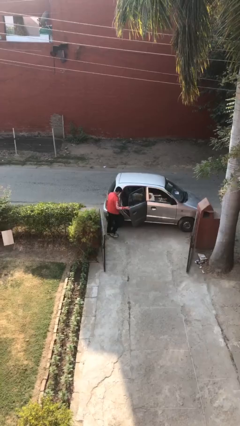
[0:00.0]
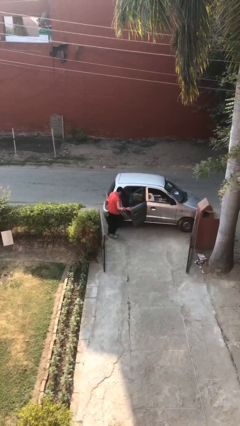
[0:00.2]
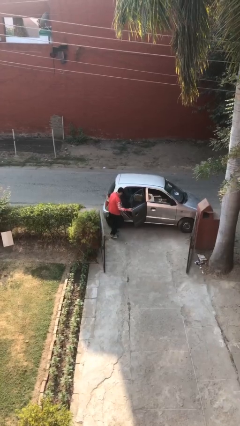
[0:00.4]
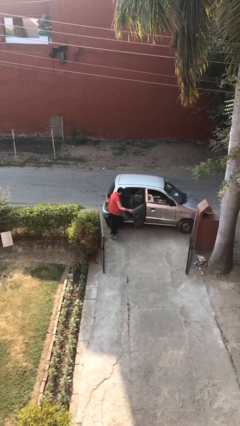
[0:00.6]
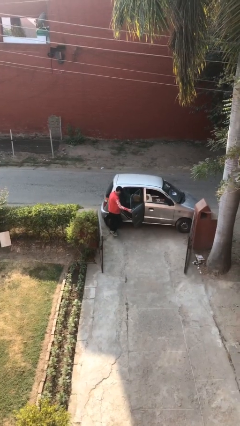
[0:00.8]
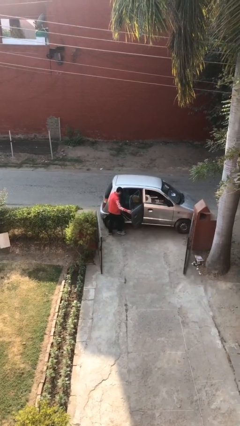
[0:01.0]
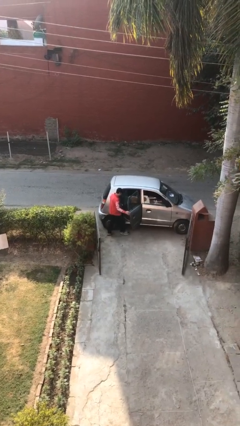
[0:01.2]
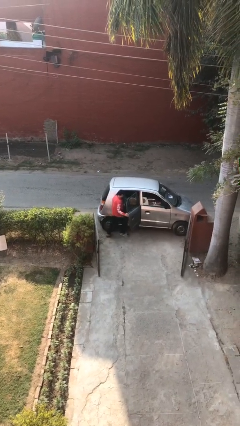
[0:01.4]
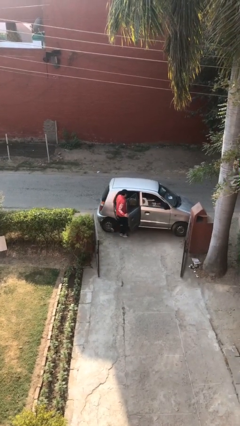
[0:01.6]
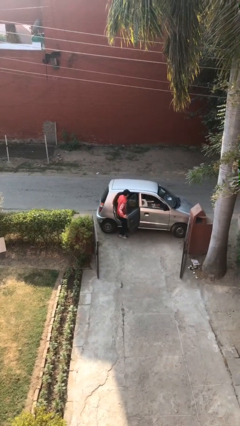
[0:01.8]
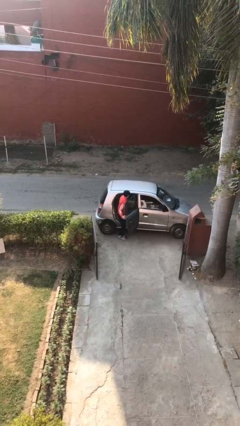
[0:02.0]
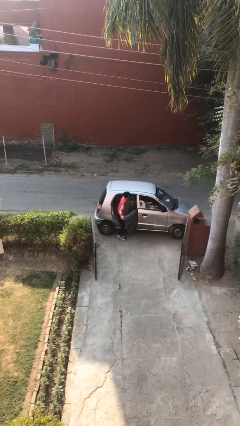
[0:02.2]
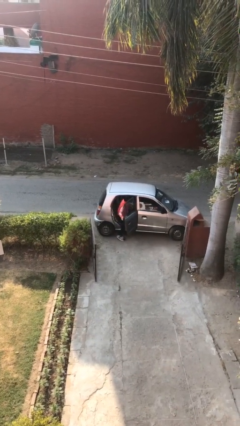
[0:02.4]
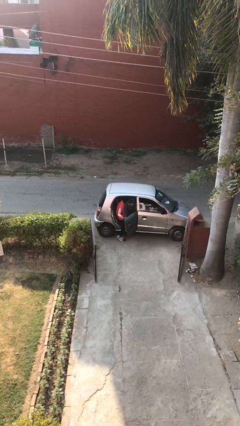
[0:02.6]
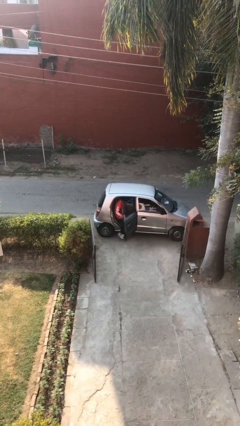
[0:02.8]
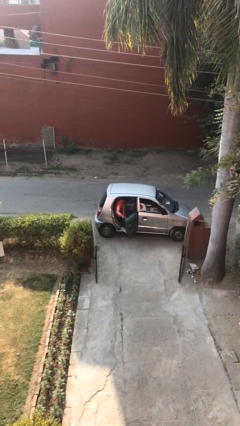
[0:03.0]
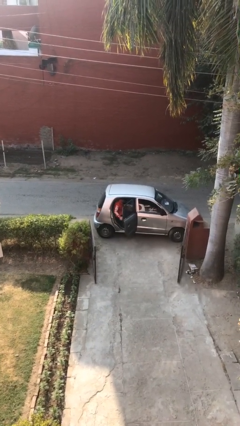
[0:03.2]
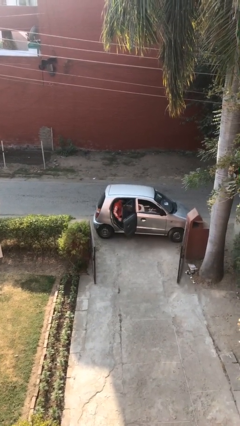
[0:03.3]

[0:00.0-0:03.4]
person enters car

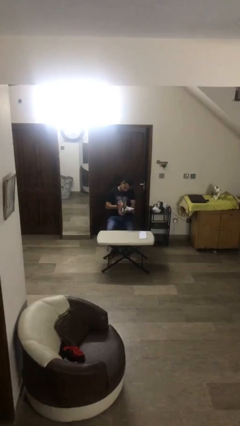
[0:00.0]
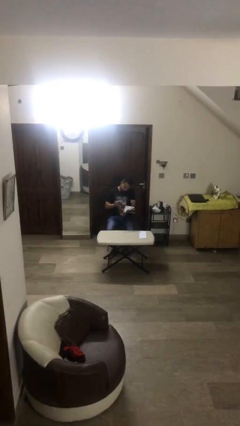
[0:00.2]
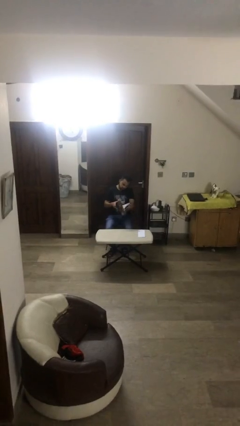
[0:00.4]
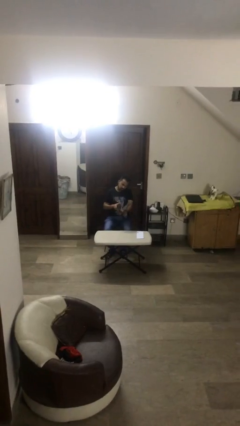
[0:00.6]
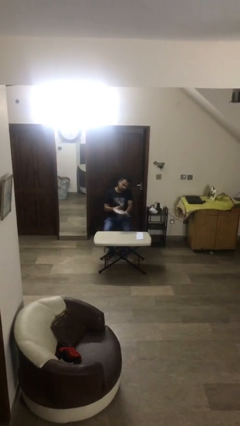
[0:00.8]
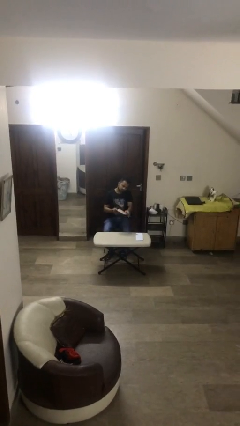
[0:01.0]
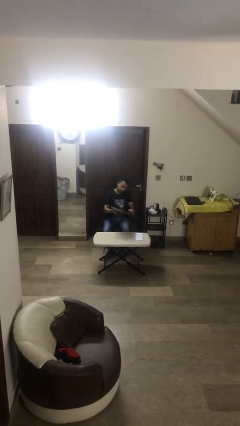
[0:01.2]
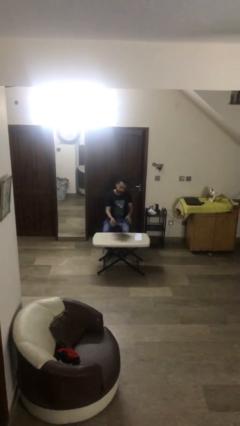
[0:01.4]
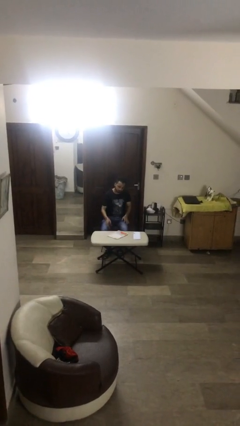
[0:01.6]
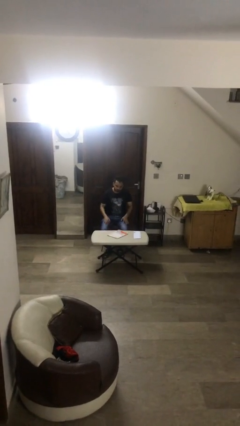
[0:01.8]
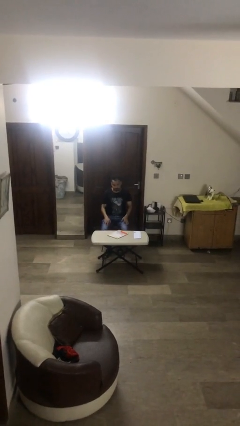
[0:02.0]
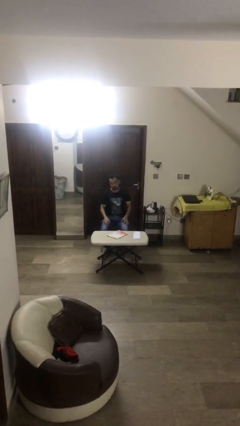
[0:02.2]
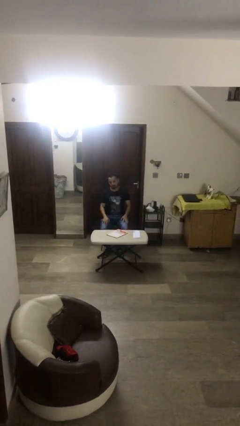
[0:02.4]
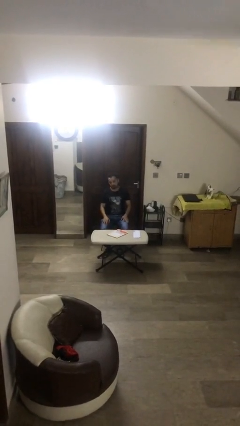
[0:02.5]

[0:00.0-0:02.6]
person puts down object on table

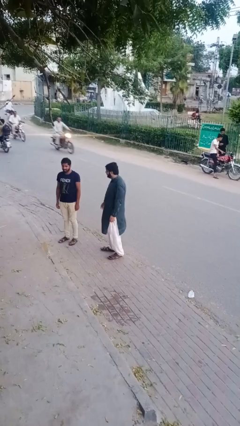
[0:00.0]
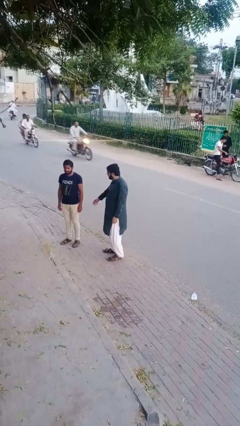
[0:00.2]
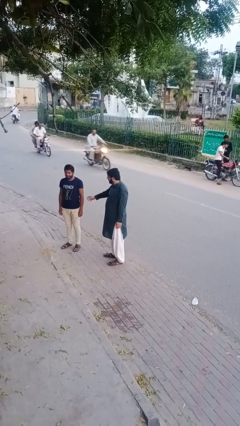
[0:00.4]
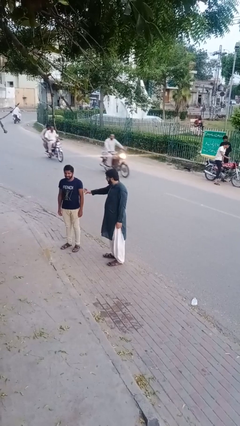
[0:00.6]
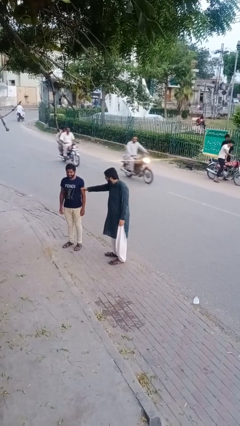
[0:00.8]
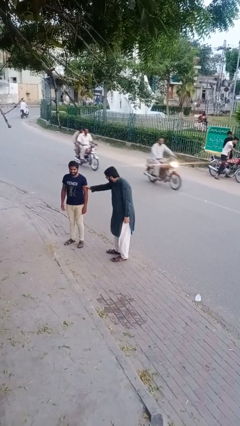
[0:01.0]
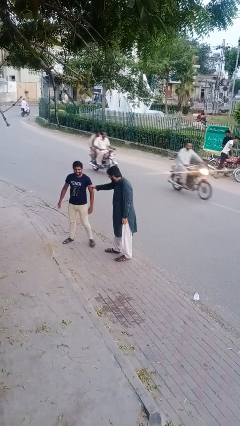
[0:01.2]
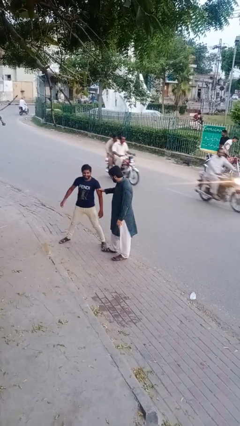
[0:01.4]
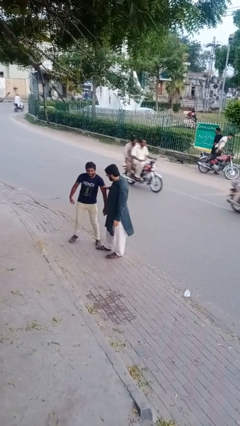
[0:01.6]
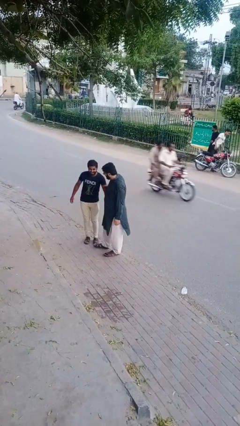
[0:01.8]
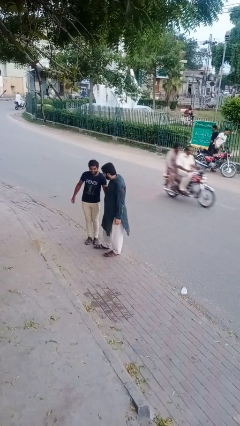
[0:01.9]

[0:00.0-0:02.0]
person grabs person by bicep

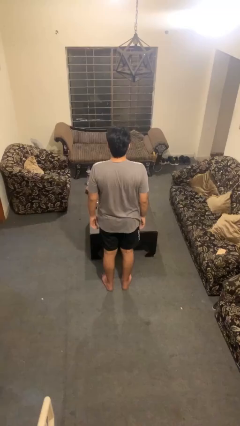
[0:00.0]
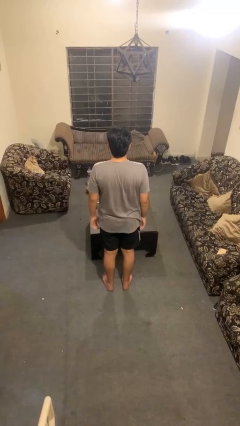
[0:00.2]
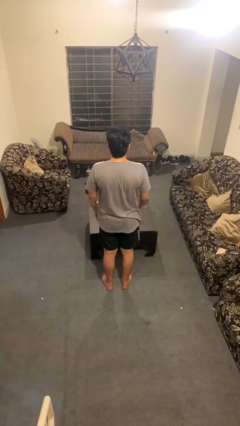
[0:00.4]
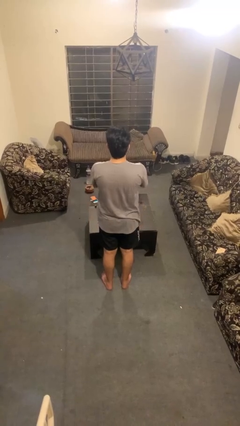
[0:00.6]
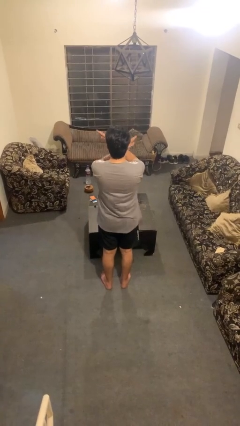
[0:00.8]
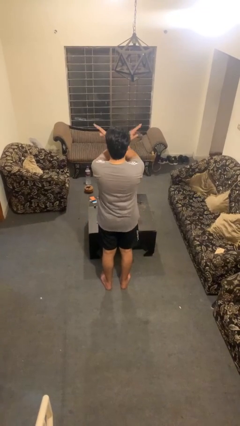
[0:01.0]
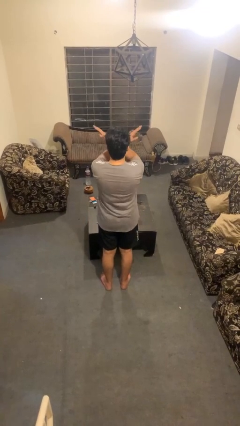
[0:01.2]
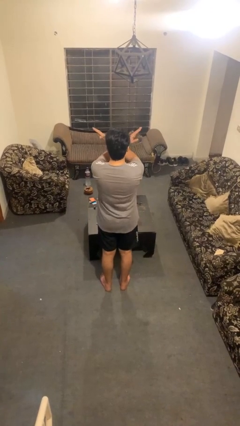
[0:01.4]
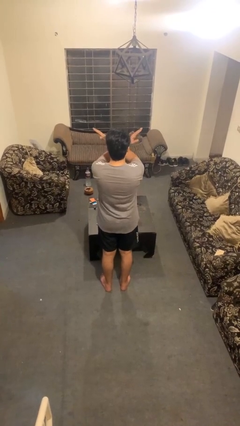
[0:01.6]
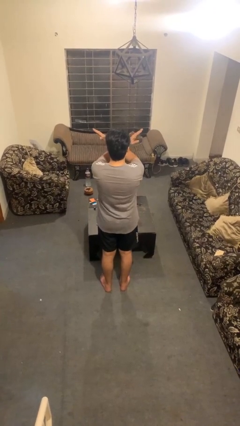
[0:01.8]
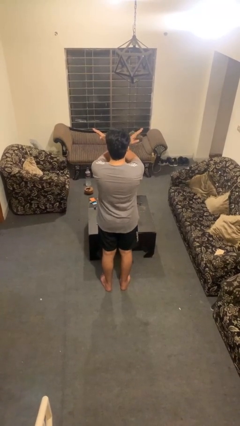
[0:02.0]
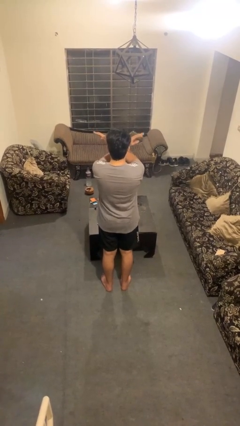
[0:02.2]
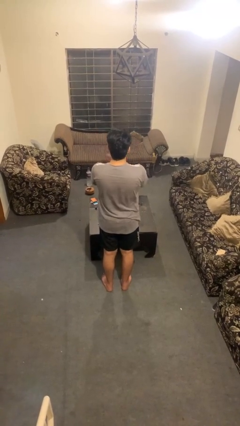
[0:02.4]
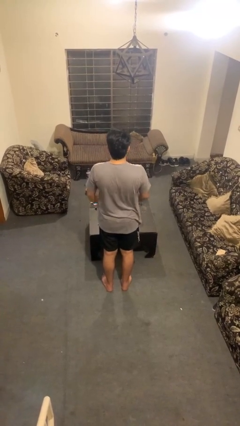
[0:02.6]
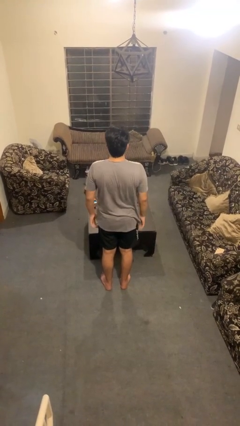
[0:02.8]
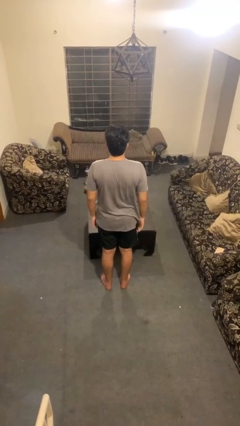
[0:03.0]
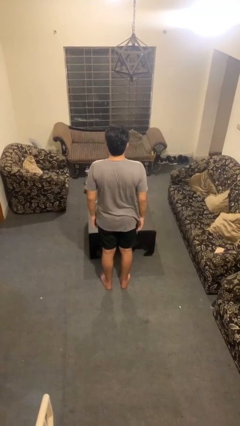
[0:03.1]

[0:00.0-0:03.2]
person gestures arms x

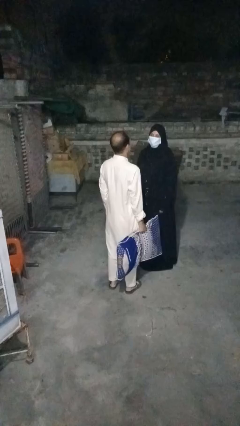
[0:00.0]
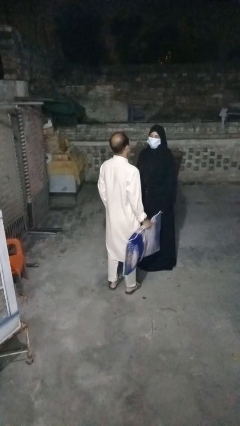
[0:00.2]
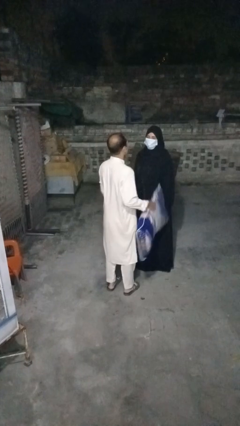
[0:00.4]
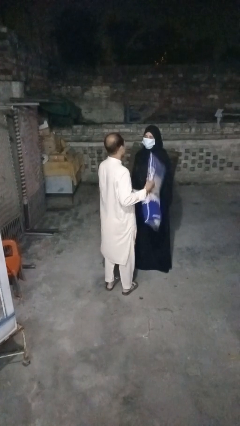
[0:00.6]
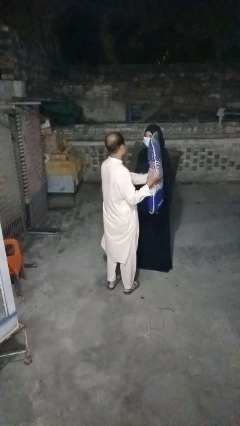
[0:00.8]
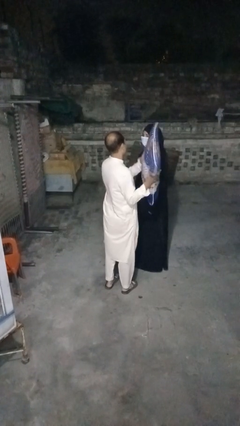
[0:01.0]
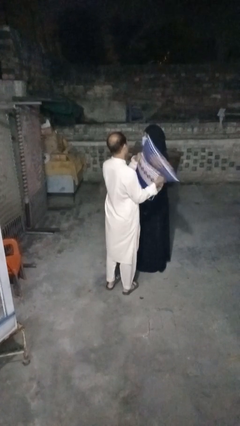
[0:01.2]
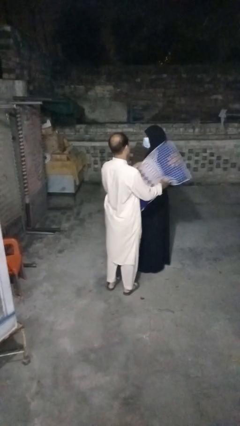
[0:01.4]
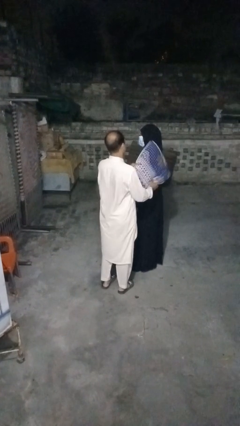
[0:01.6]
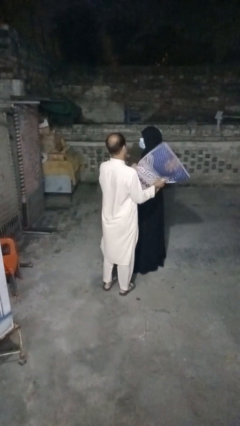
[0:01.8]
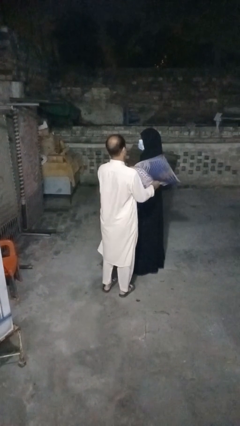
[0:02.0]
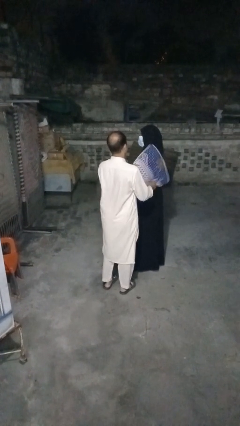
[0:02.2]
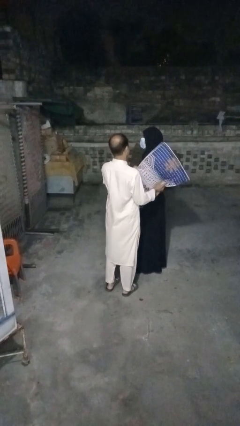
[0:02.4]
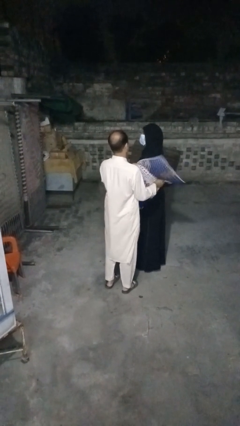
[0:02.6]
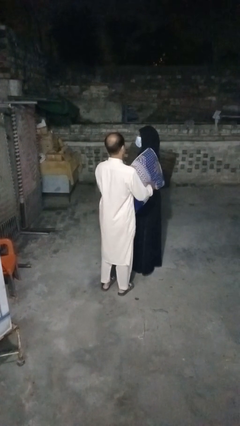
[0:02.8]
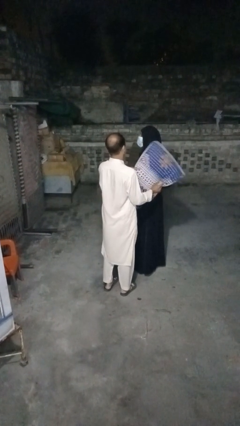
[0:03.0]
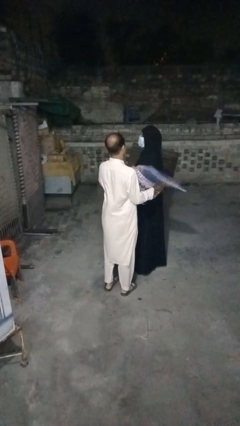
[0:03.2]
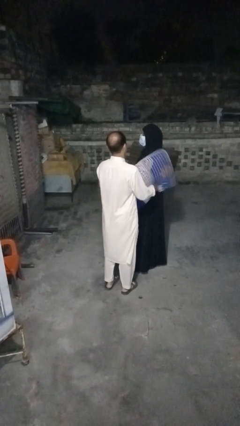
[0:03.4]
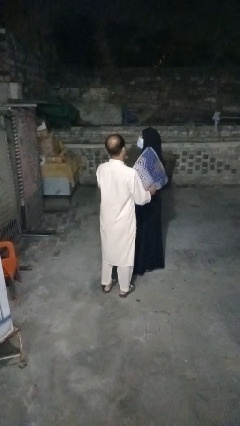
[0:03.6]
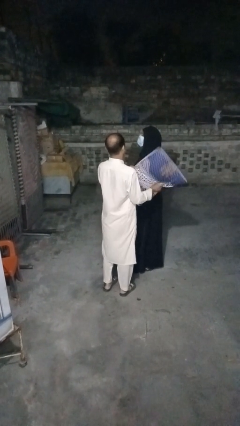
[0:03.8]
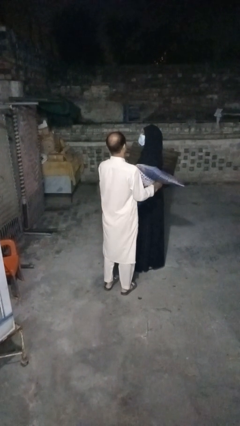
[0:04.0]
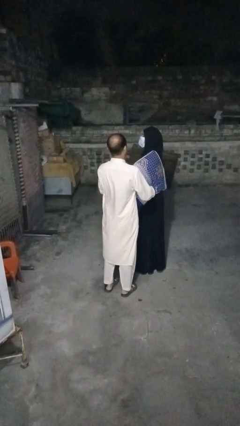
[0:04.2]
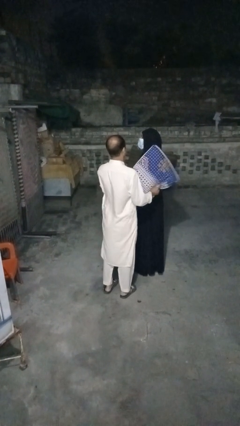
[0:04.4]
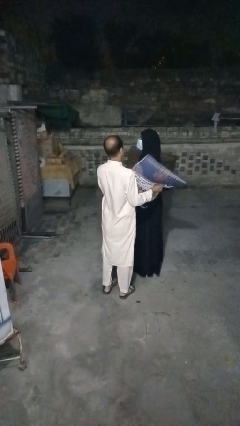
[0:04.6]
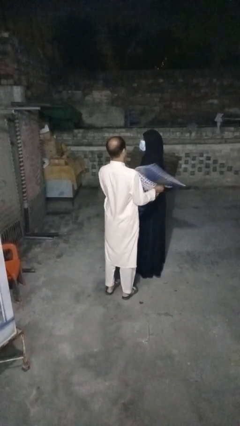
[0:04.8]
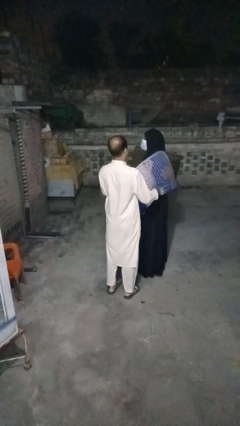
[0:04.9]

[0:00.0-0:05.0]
person hits person with pillow

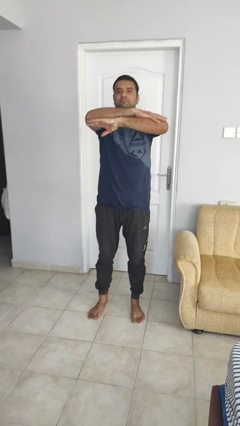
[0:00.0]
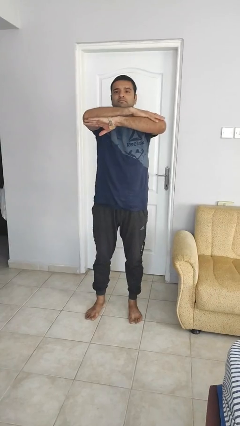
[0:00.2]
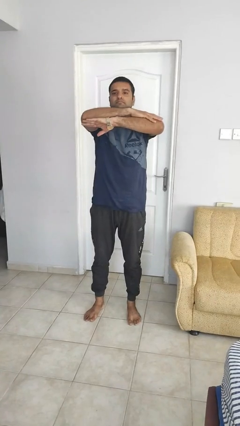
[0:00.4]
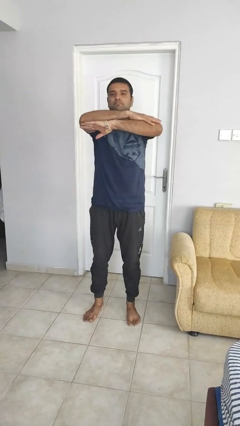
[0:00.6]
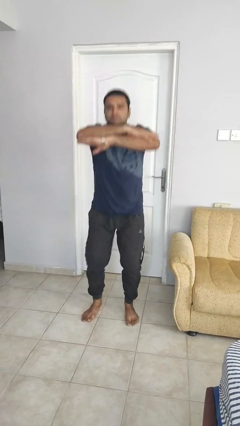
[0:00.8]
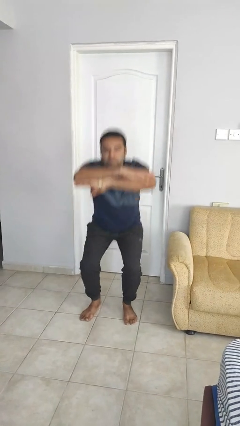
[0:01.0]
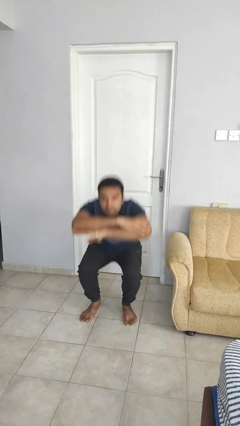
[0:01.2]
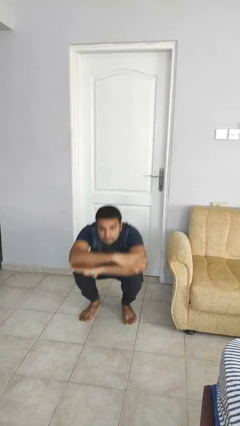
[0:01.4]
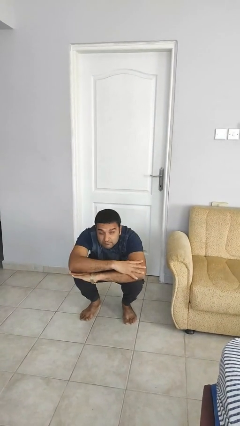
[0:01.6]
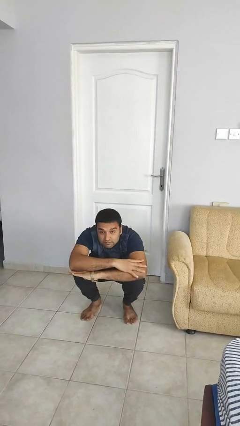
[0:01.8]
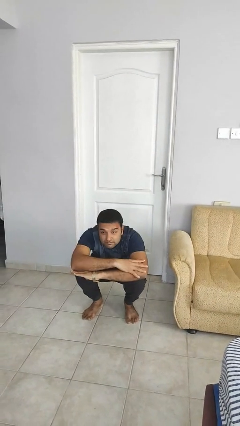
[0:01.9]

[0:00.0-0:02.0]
person squats
